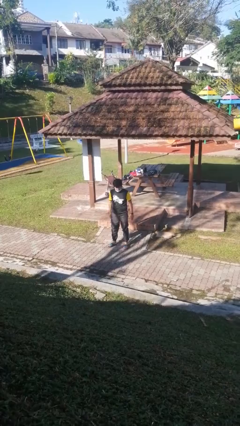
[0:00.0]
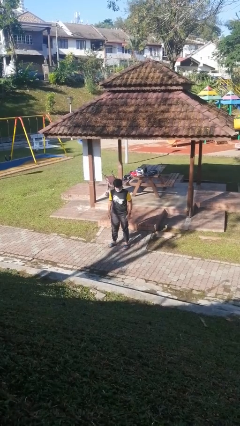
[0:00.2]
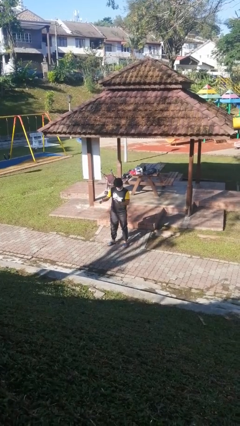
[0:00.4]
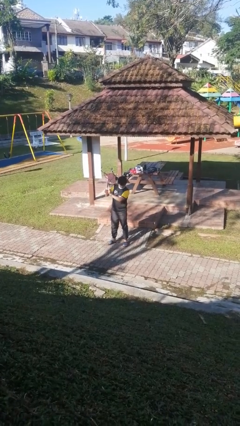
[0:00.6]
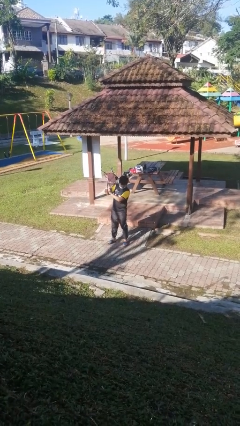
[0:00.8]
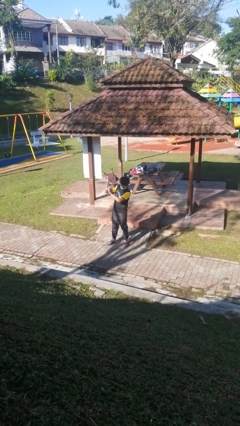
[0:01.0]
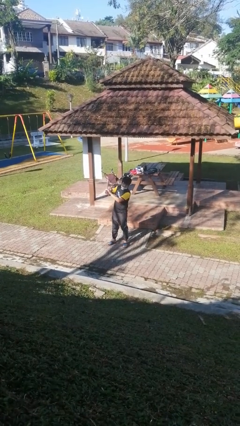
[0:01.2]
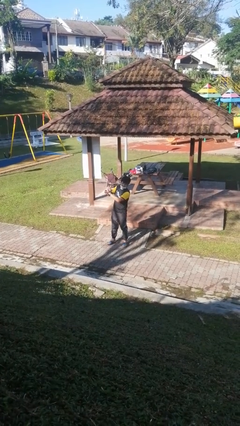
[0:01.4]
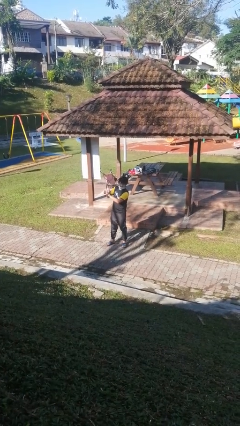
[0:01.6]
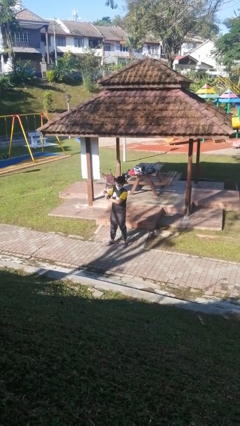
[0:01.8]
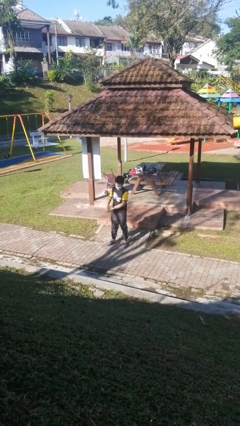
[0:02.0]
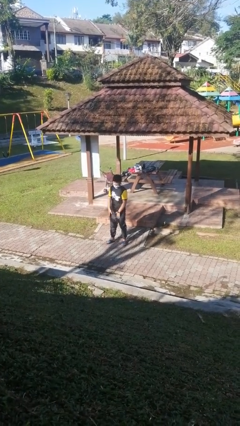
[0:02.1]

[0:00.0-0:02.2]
person claps hands

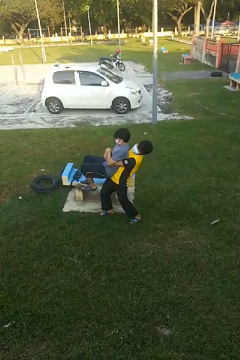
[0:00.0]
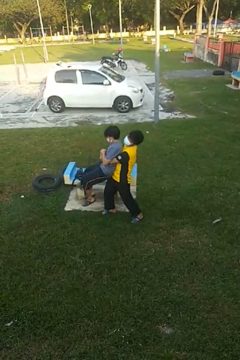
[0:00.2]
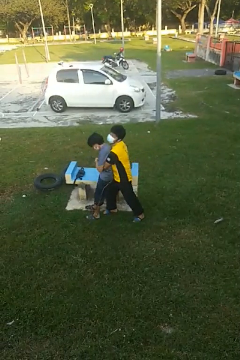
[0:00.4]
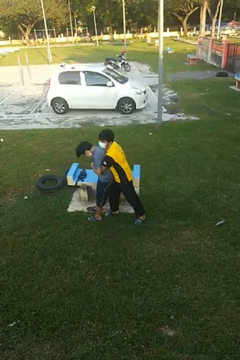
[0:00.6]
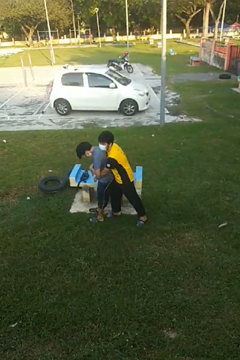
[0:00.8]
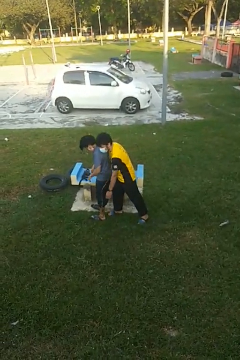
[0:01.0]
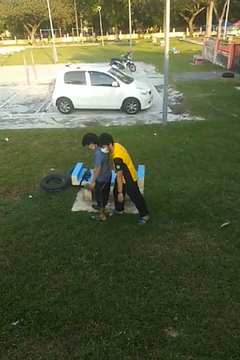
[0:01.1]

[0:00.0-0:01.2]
person puts down person

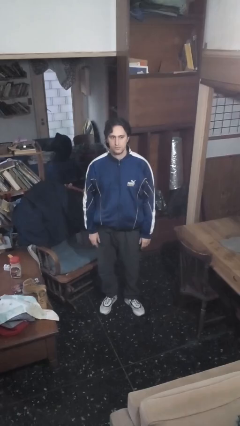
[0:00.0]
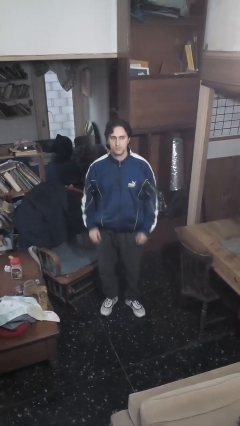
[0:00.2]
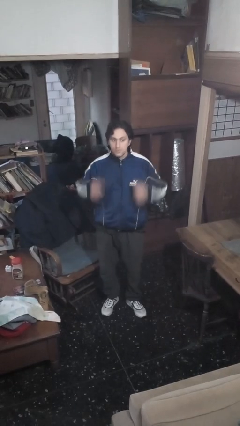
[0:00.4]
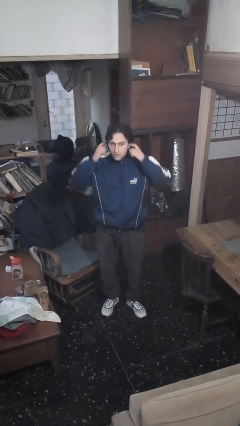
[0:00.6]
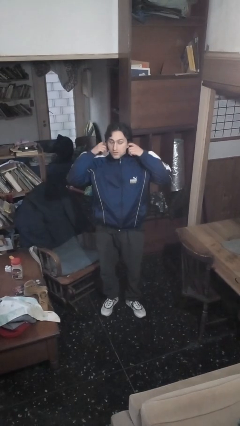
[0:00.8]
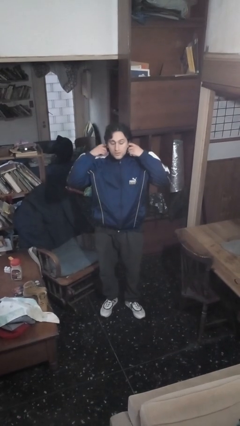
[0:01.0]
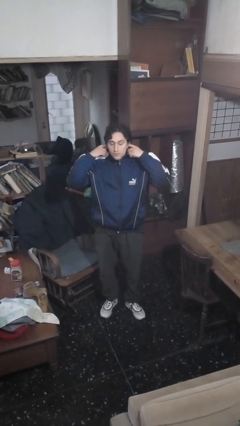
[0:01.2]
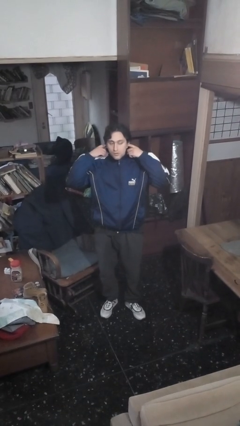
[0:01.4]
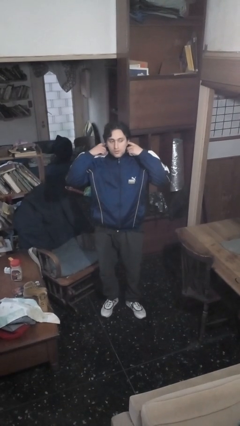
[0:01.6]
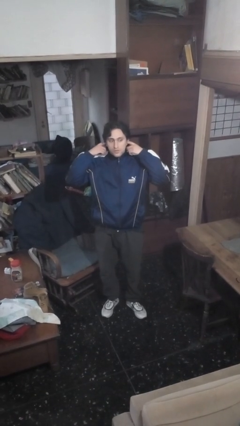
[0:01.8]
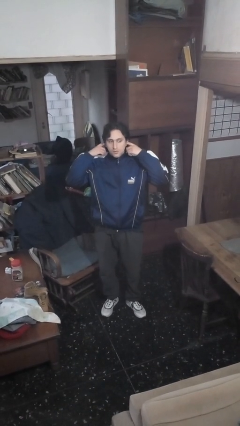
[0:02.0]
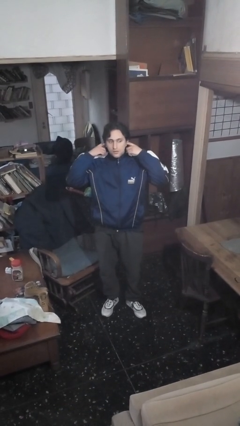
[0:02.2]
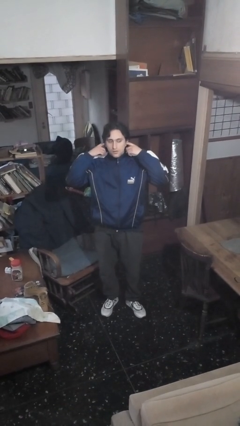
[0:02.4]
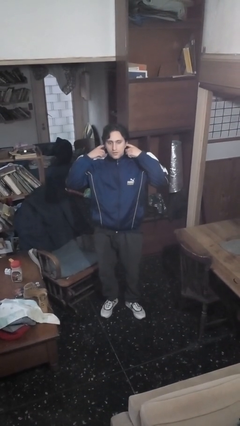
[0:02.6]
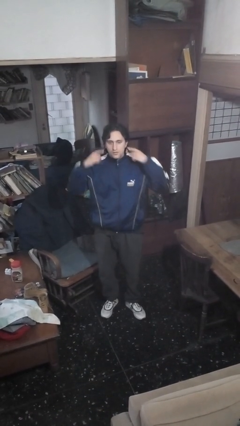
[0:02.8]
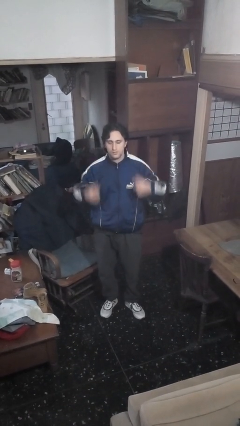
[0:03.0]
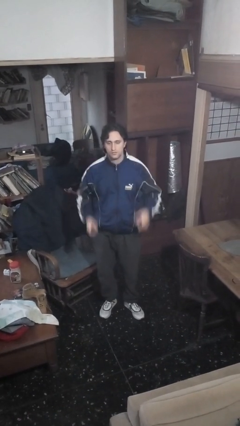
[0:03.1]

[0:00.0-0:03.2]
person puts fingers in ear

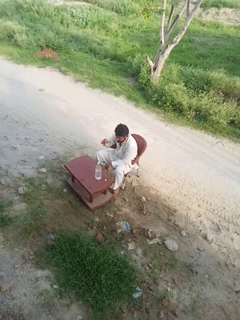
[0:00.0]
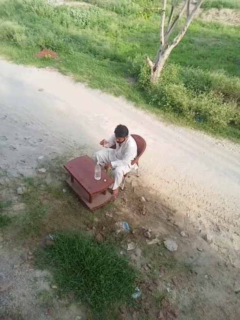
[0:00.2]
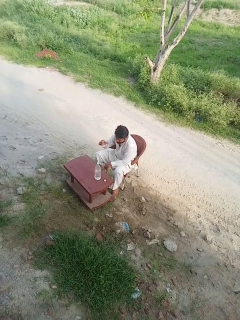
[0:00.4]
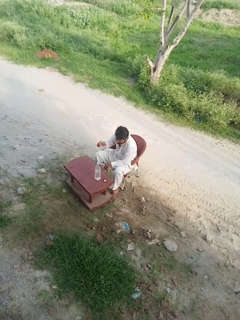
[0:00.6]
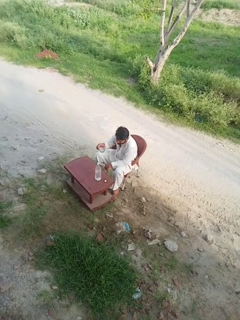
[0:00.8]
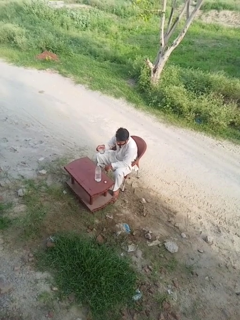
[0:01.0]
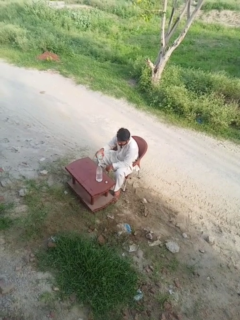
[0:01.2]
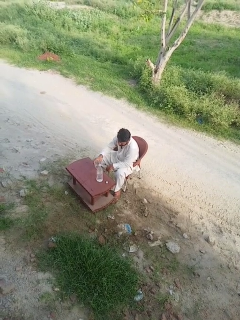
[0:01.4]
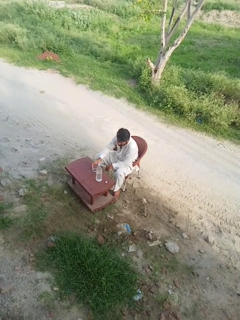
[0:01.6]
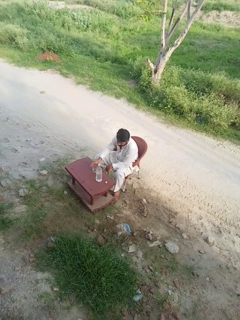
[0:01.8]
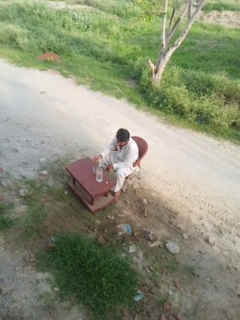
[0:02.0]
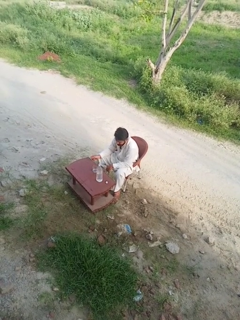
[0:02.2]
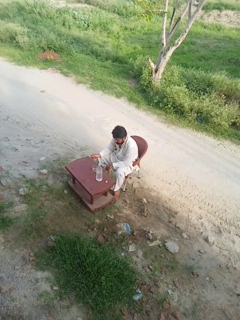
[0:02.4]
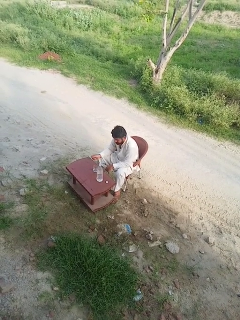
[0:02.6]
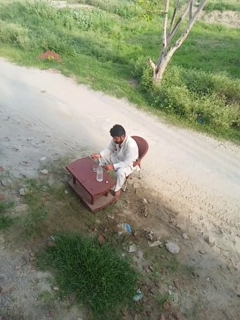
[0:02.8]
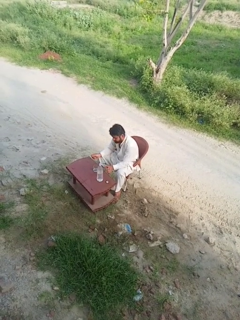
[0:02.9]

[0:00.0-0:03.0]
person puts down object on table

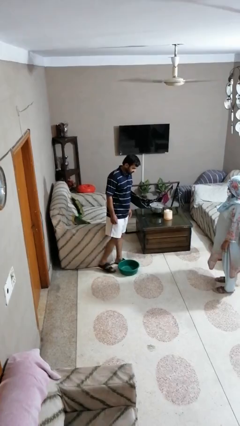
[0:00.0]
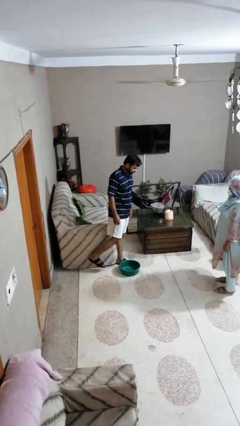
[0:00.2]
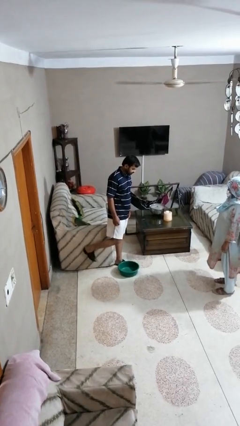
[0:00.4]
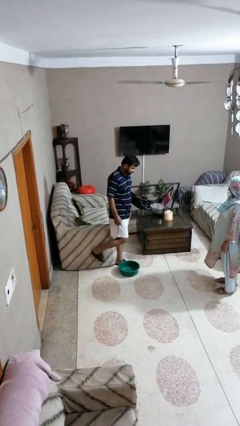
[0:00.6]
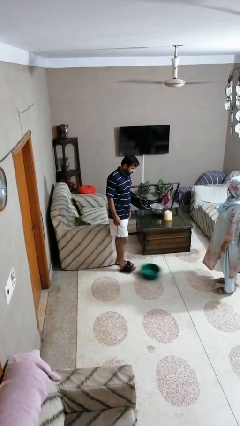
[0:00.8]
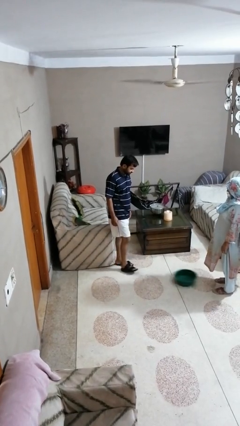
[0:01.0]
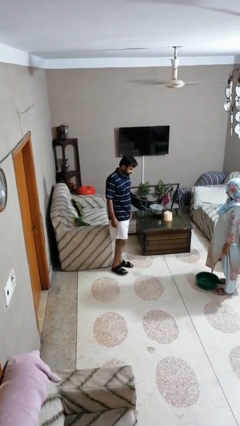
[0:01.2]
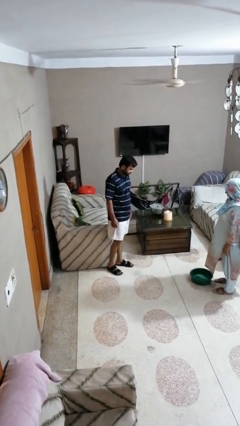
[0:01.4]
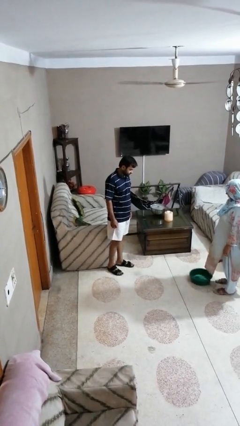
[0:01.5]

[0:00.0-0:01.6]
person kicks object to person

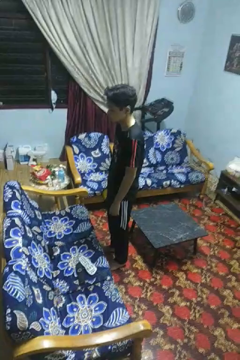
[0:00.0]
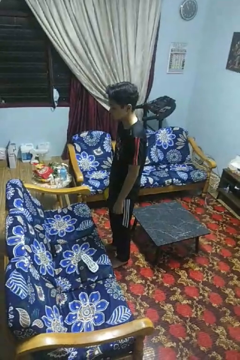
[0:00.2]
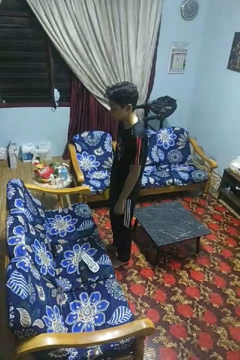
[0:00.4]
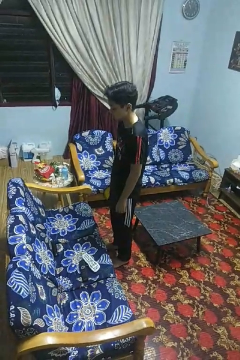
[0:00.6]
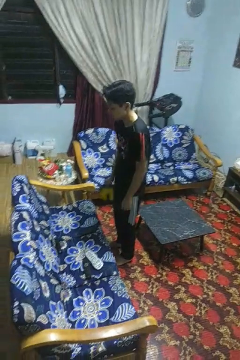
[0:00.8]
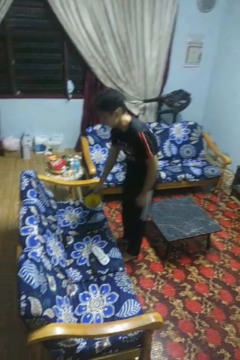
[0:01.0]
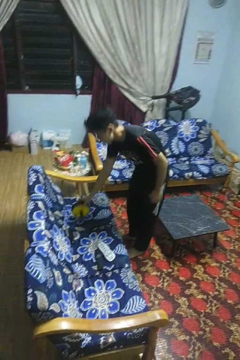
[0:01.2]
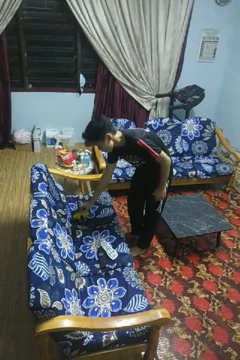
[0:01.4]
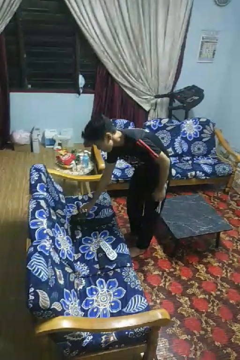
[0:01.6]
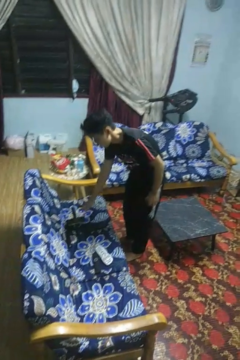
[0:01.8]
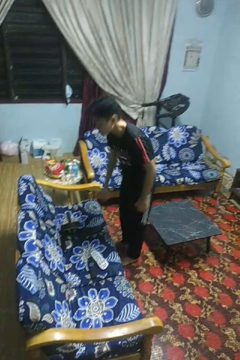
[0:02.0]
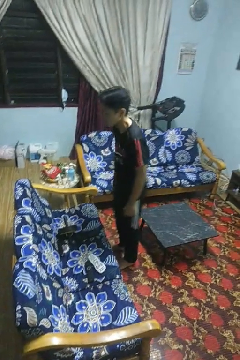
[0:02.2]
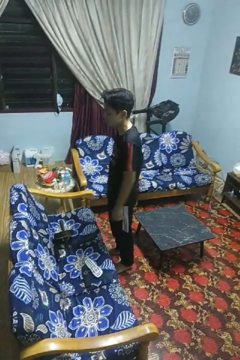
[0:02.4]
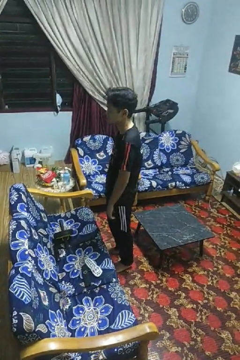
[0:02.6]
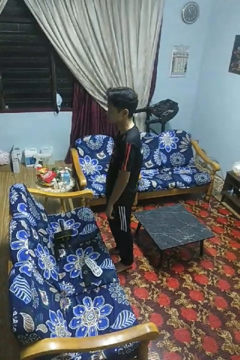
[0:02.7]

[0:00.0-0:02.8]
person puts down object on couch

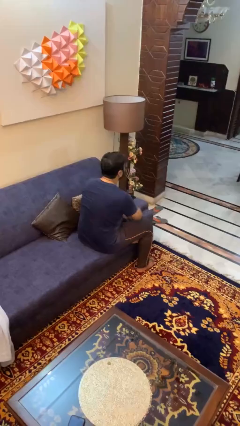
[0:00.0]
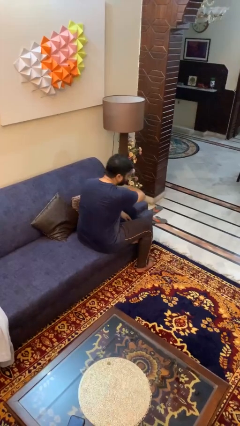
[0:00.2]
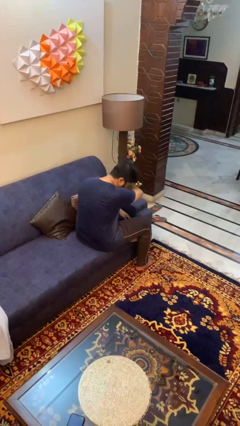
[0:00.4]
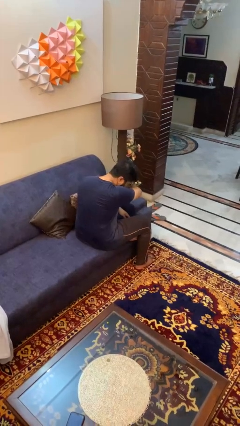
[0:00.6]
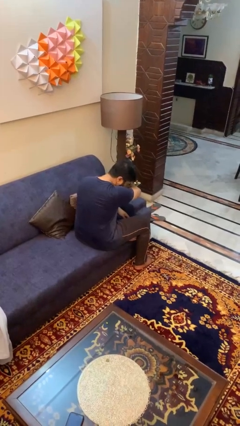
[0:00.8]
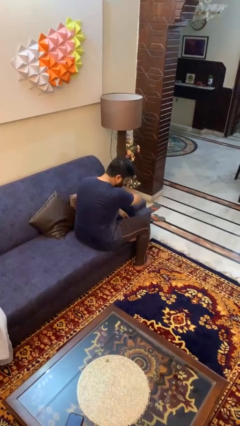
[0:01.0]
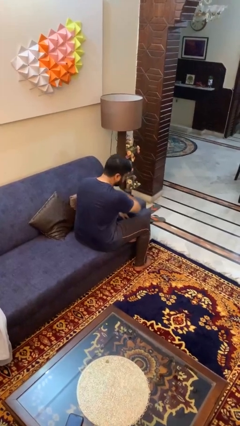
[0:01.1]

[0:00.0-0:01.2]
person sneezes into arm

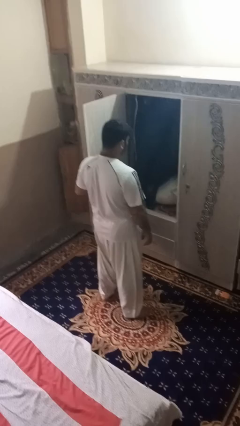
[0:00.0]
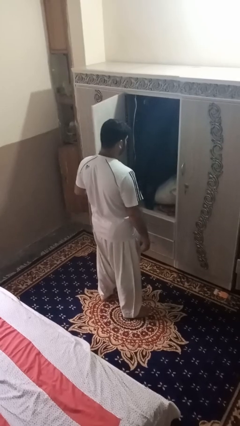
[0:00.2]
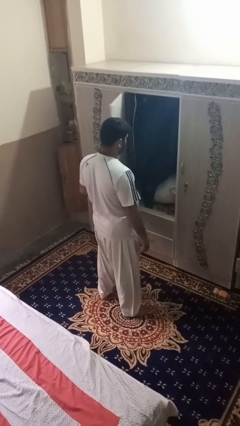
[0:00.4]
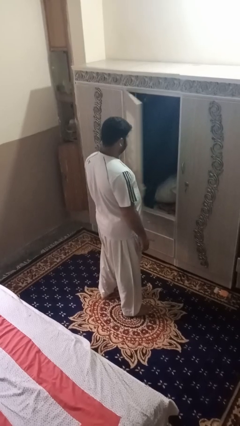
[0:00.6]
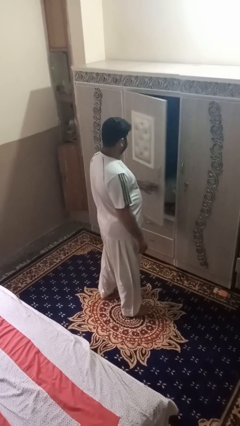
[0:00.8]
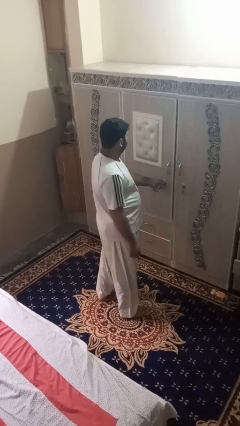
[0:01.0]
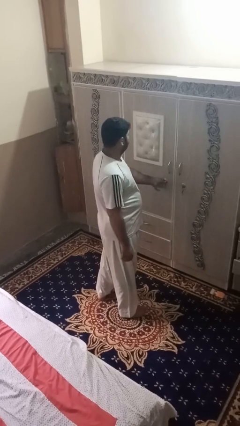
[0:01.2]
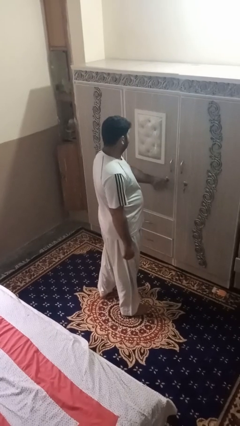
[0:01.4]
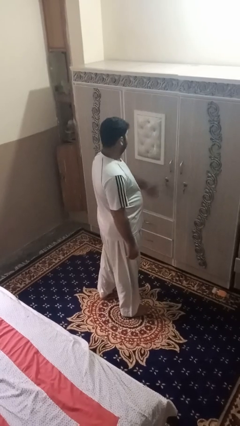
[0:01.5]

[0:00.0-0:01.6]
person closes dresser drawer

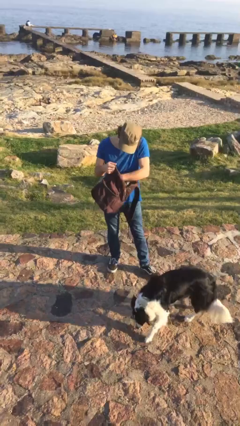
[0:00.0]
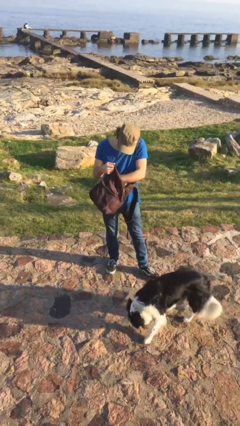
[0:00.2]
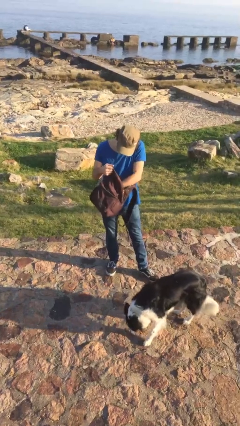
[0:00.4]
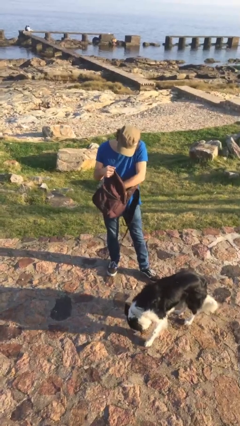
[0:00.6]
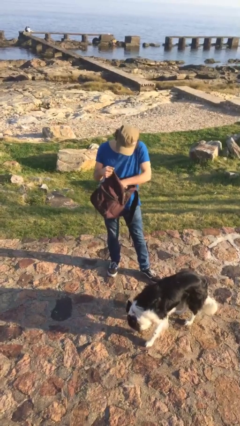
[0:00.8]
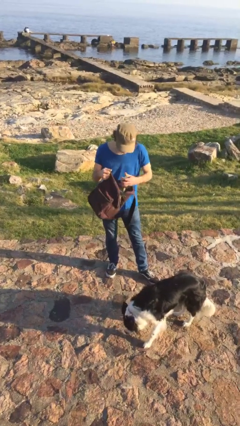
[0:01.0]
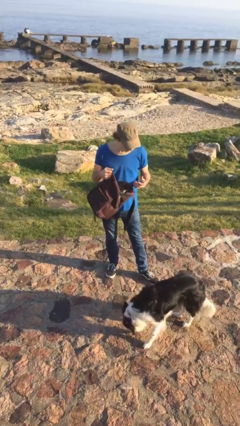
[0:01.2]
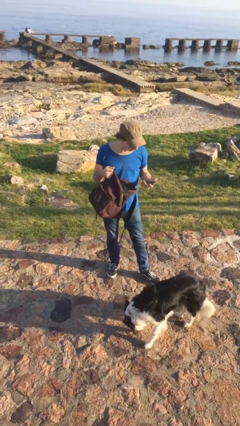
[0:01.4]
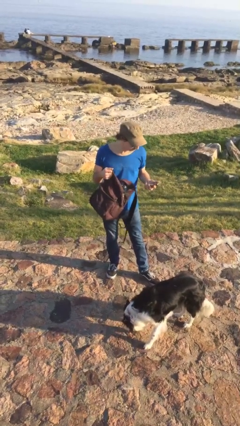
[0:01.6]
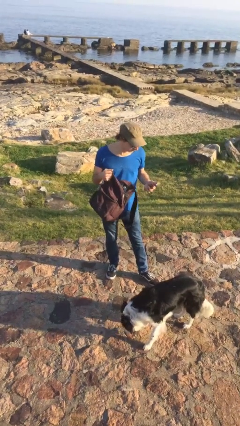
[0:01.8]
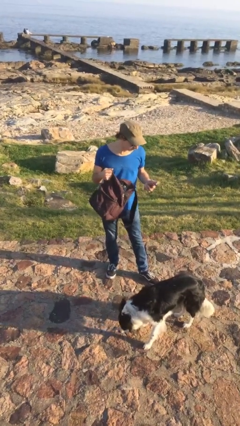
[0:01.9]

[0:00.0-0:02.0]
person takes object from backpack
